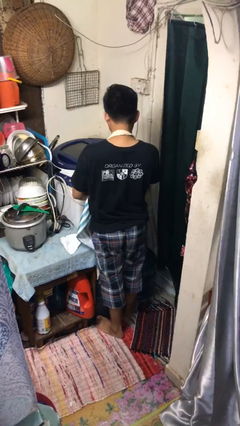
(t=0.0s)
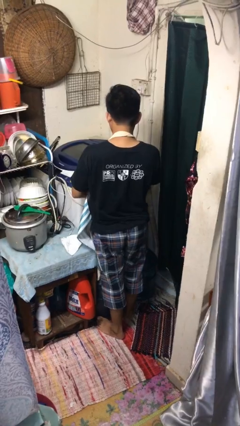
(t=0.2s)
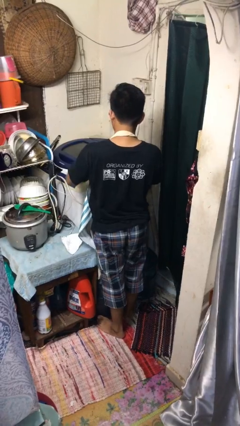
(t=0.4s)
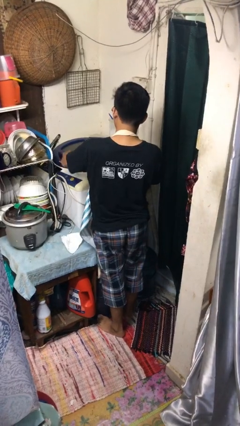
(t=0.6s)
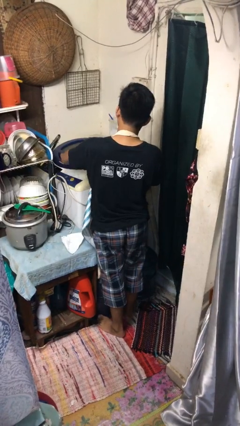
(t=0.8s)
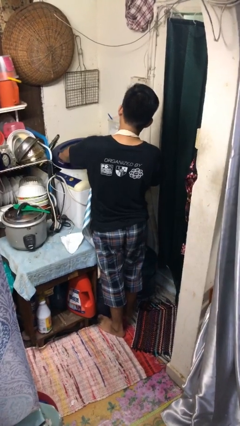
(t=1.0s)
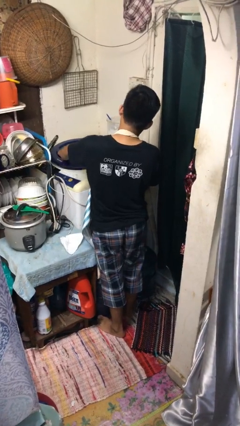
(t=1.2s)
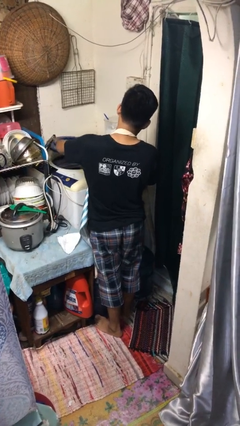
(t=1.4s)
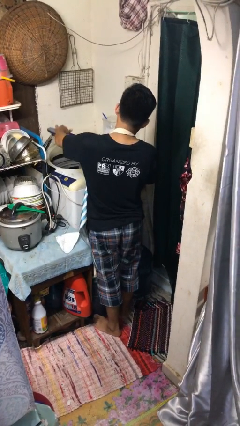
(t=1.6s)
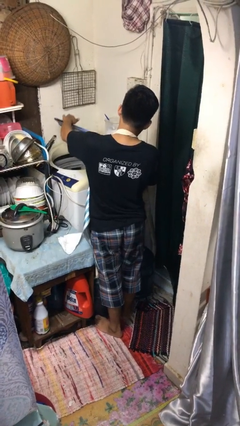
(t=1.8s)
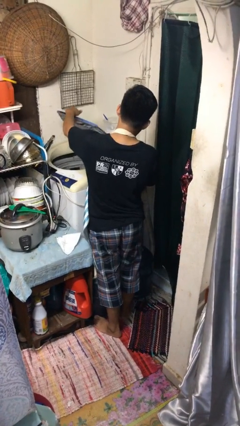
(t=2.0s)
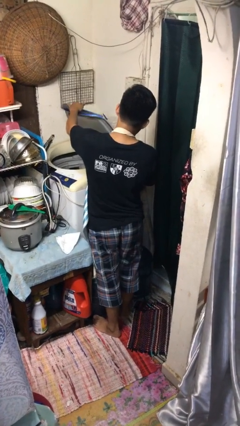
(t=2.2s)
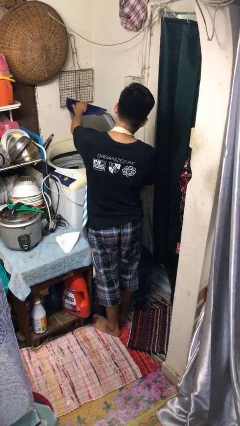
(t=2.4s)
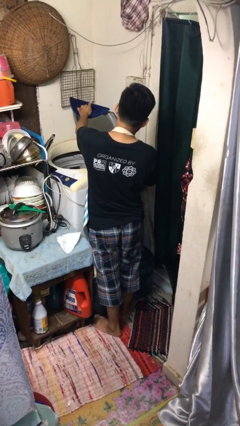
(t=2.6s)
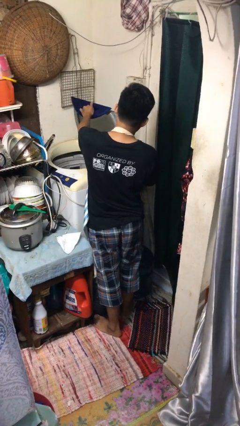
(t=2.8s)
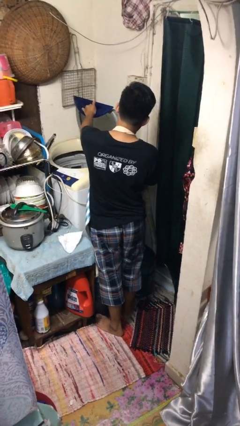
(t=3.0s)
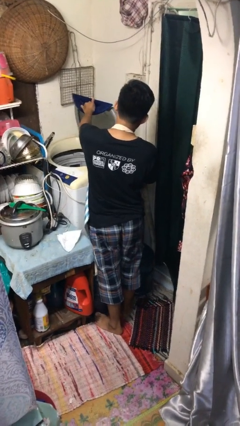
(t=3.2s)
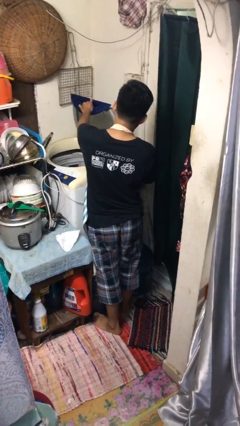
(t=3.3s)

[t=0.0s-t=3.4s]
person opens clothes washer

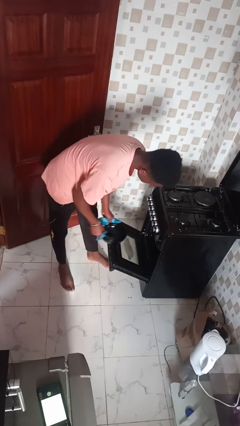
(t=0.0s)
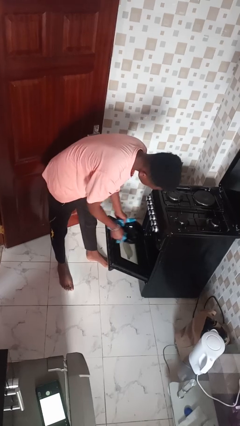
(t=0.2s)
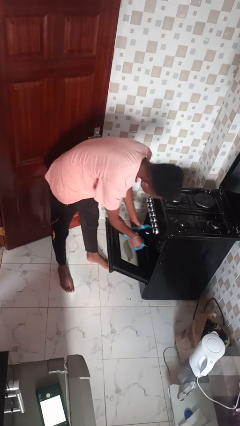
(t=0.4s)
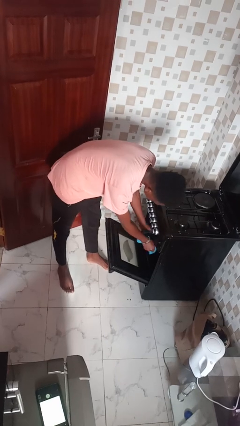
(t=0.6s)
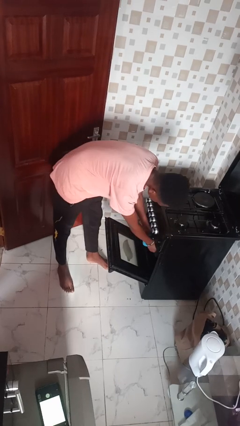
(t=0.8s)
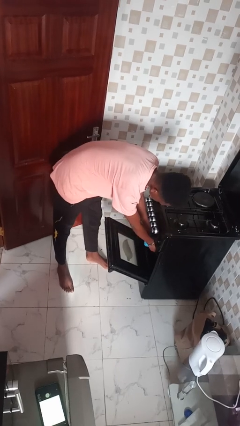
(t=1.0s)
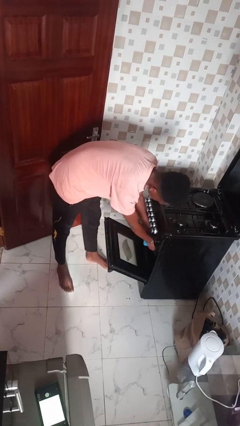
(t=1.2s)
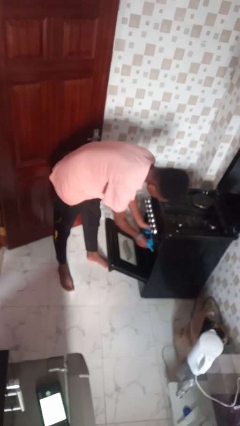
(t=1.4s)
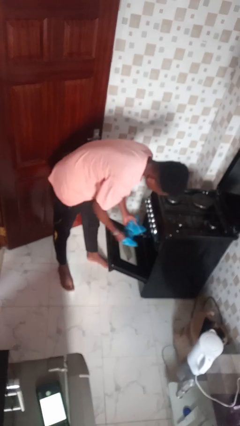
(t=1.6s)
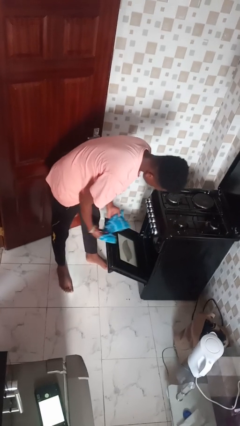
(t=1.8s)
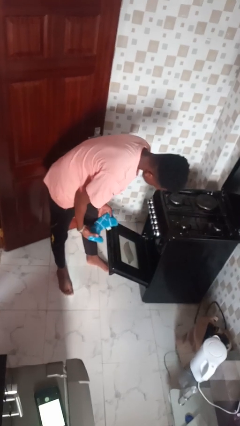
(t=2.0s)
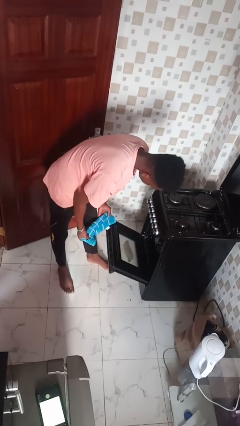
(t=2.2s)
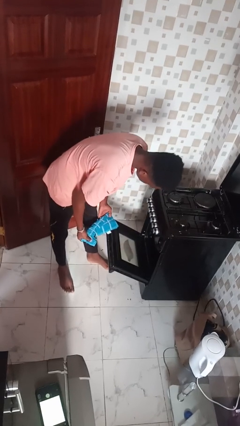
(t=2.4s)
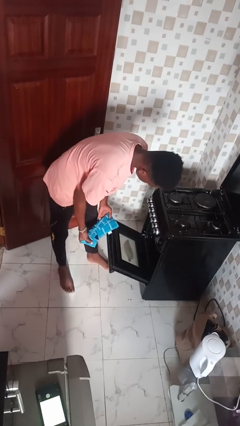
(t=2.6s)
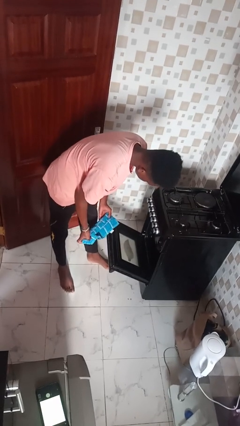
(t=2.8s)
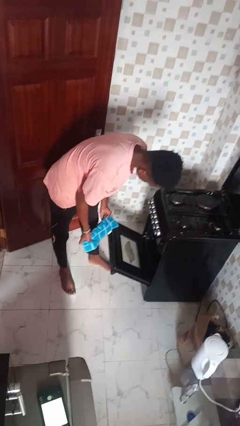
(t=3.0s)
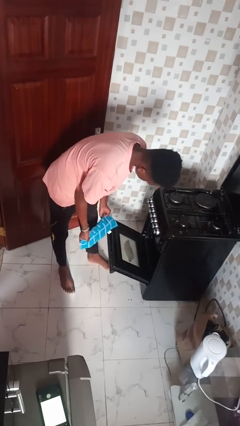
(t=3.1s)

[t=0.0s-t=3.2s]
person puts object into oven

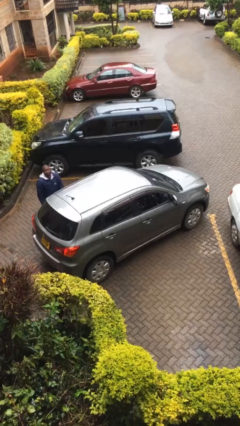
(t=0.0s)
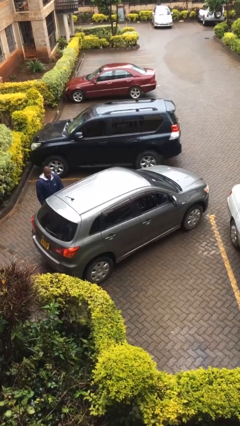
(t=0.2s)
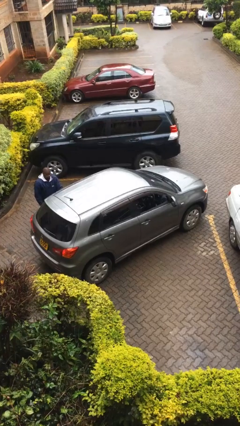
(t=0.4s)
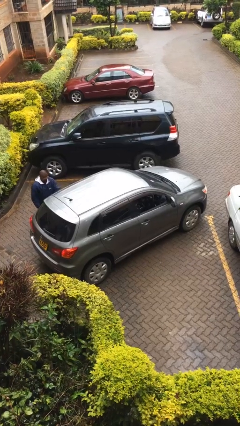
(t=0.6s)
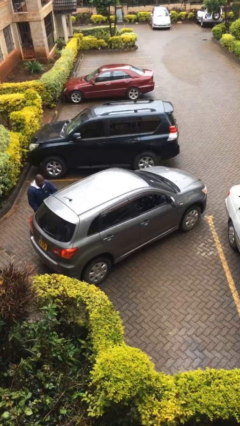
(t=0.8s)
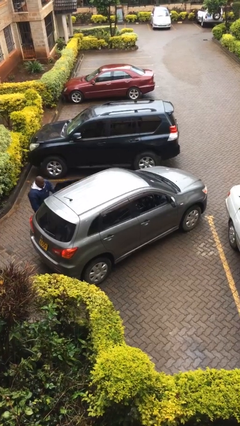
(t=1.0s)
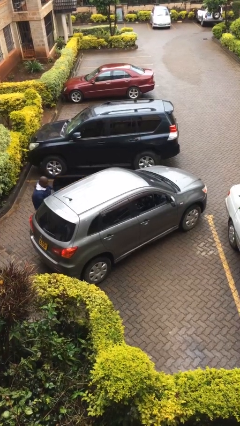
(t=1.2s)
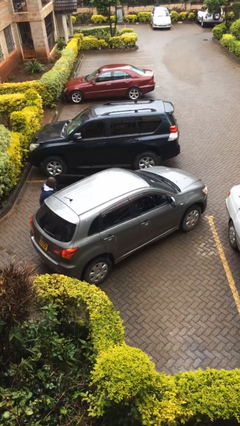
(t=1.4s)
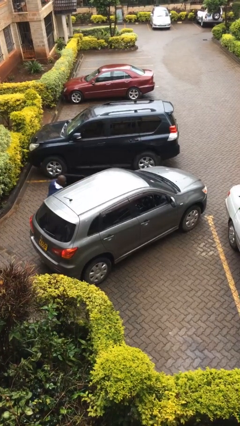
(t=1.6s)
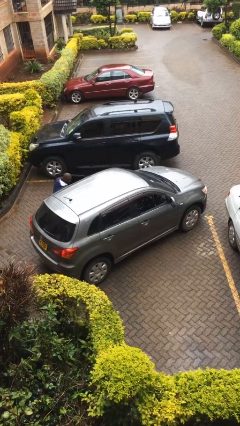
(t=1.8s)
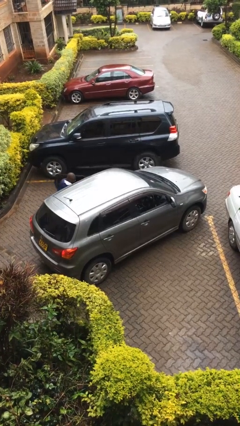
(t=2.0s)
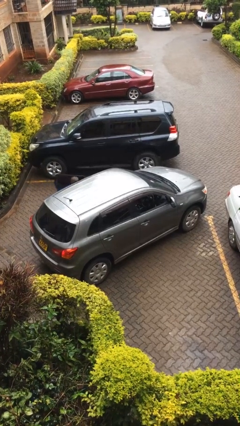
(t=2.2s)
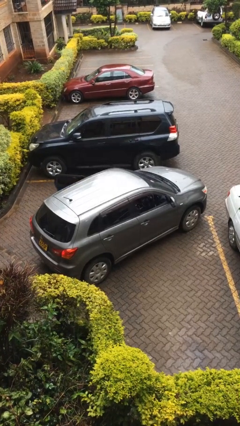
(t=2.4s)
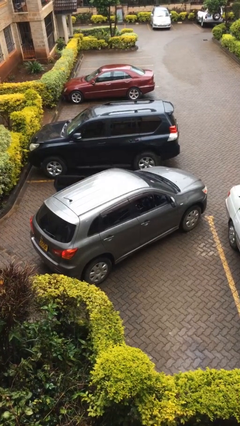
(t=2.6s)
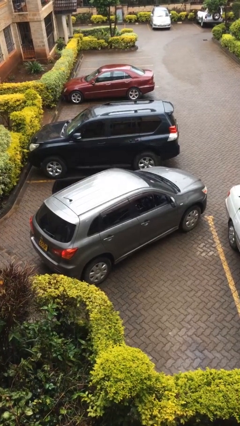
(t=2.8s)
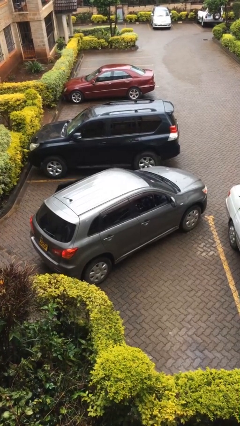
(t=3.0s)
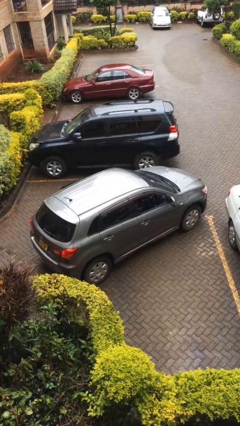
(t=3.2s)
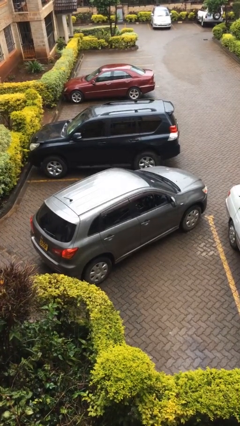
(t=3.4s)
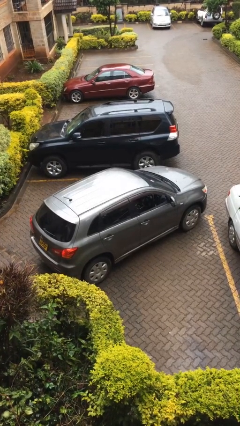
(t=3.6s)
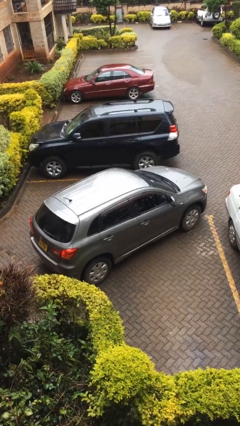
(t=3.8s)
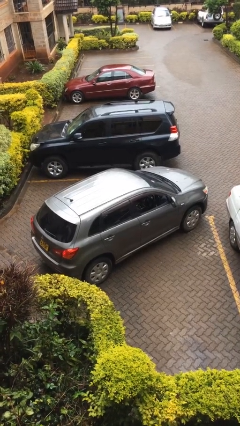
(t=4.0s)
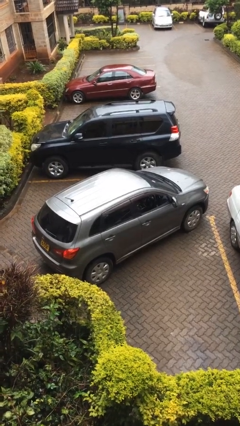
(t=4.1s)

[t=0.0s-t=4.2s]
car picks up person

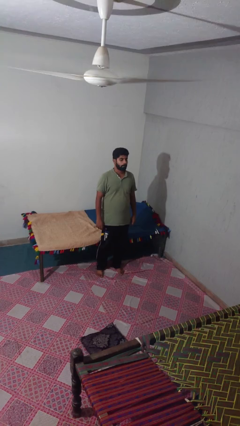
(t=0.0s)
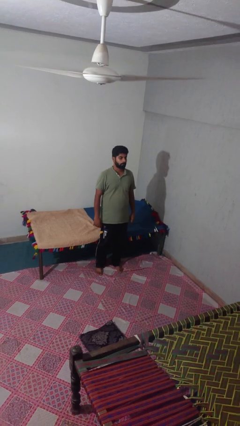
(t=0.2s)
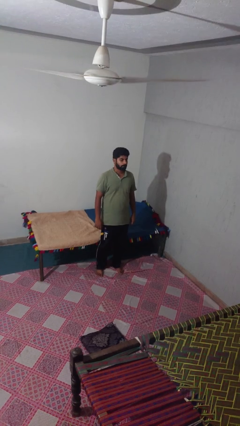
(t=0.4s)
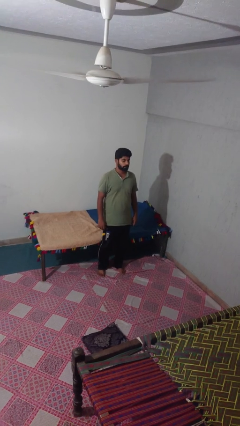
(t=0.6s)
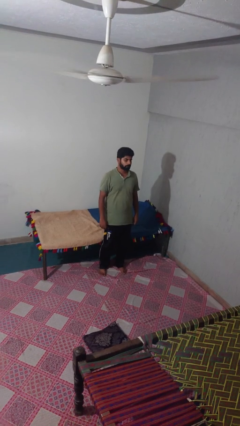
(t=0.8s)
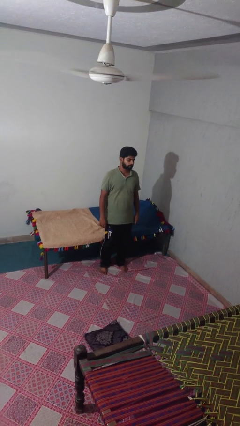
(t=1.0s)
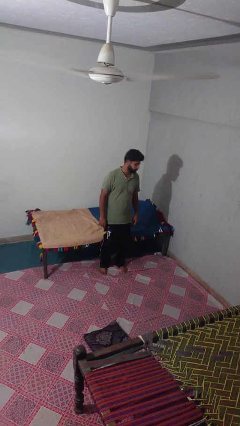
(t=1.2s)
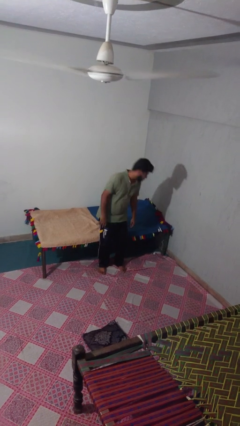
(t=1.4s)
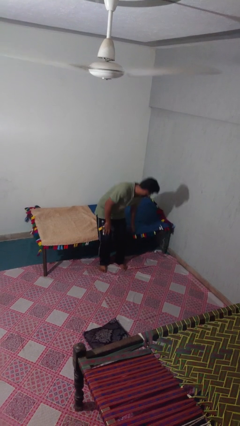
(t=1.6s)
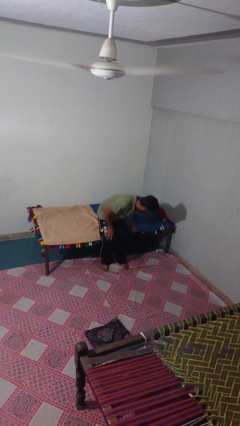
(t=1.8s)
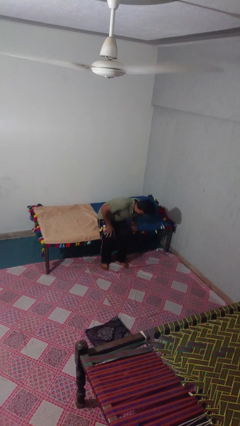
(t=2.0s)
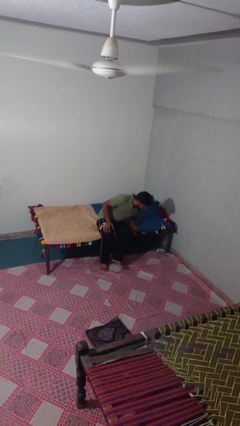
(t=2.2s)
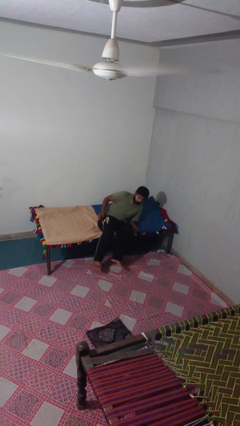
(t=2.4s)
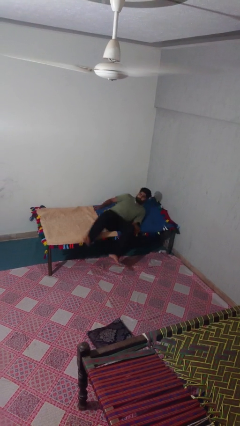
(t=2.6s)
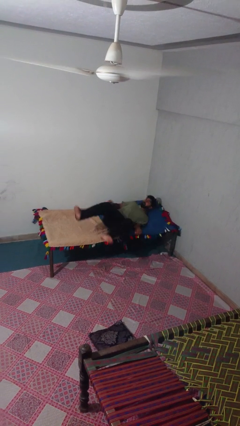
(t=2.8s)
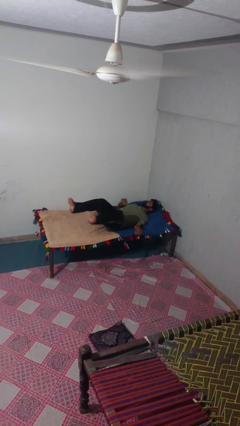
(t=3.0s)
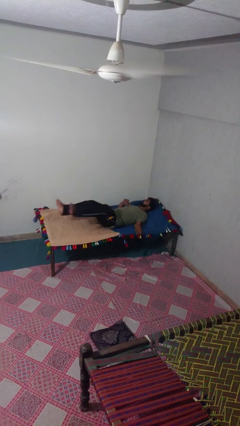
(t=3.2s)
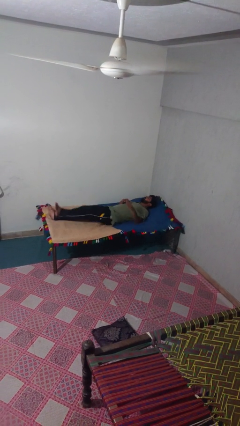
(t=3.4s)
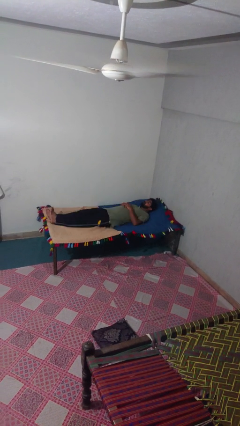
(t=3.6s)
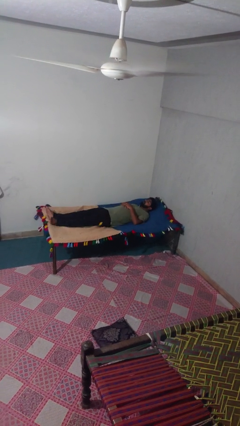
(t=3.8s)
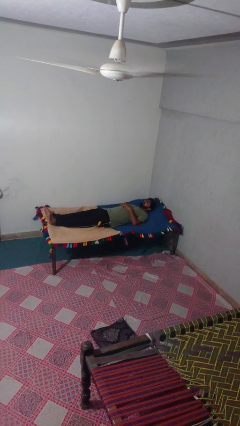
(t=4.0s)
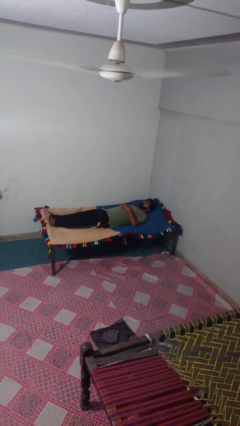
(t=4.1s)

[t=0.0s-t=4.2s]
person lies down on bed

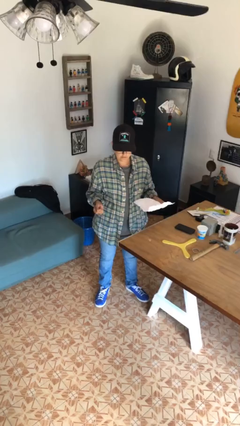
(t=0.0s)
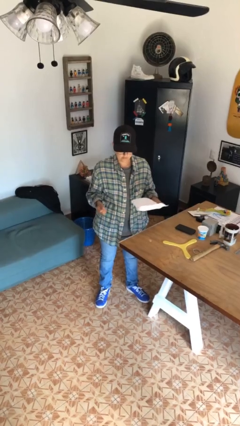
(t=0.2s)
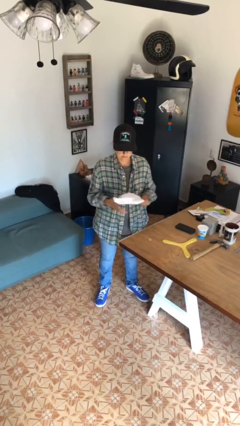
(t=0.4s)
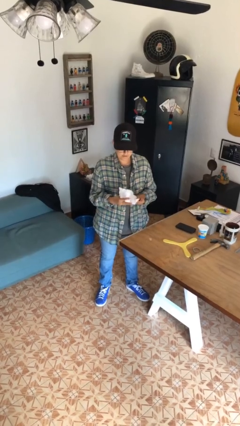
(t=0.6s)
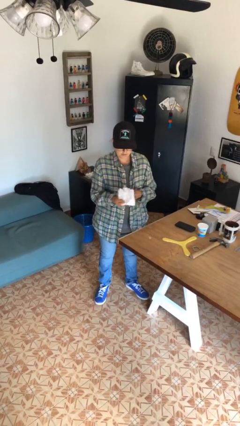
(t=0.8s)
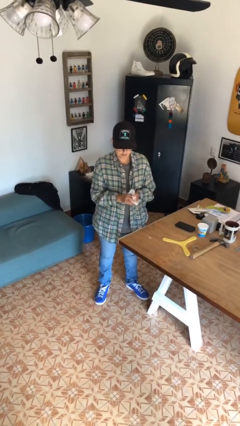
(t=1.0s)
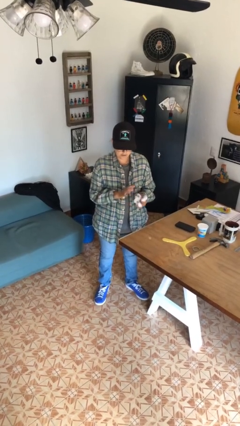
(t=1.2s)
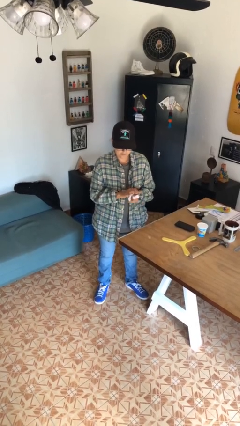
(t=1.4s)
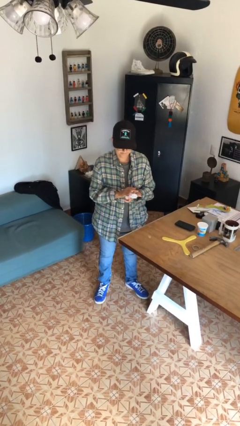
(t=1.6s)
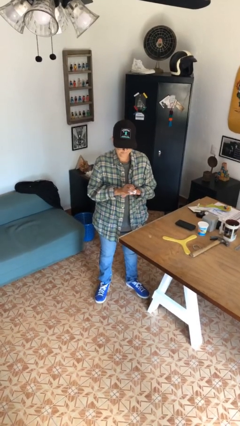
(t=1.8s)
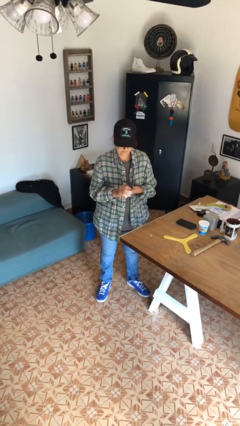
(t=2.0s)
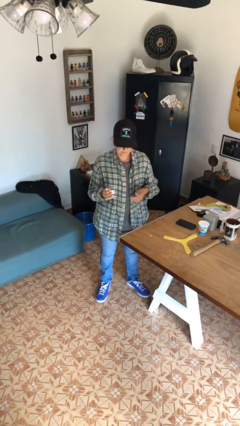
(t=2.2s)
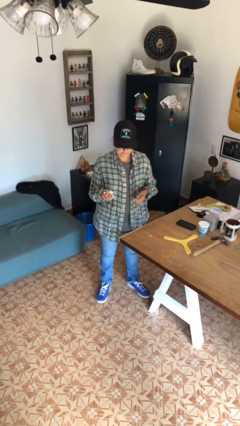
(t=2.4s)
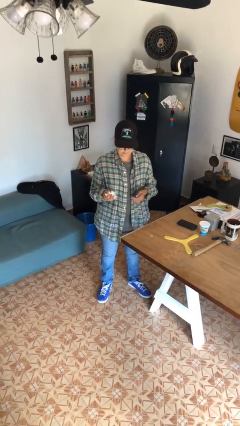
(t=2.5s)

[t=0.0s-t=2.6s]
person crumples paper
